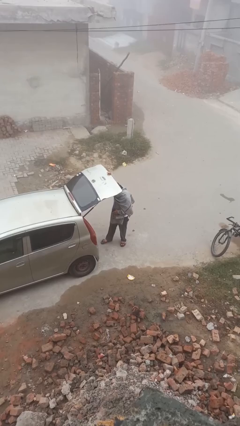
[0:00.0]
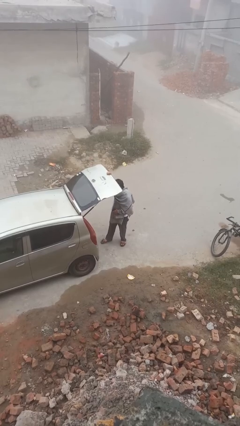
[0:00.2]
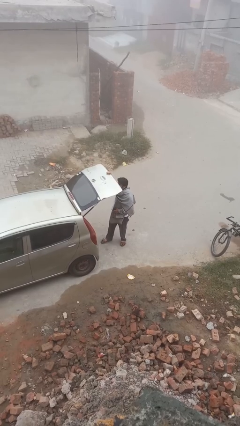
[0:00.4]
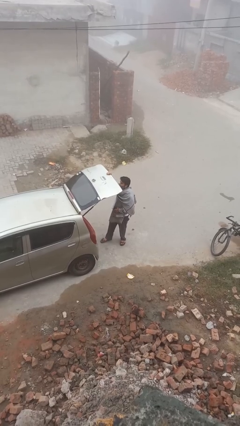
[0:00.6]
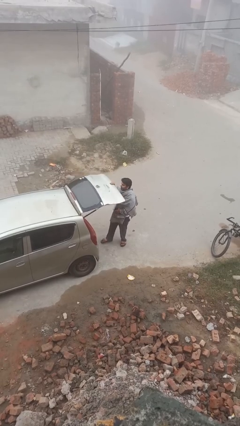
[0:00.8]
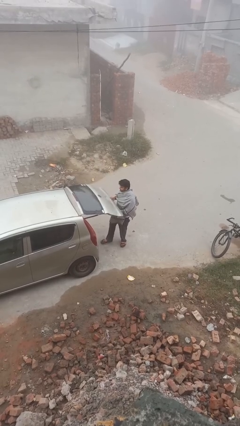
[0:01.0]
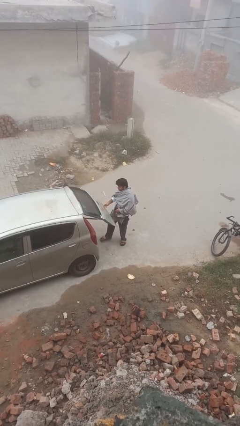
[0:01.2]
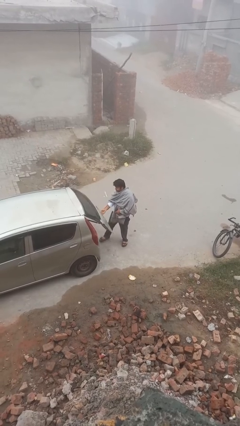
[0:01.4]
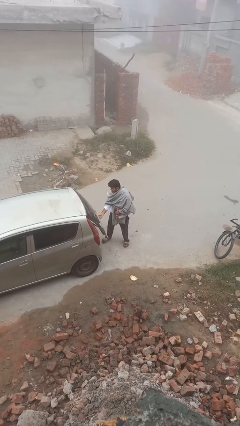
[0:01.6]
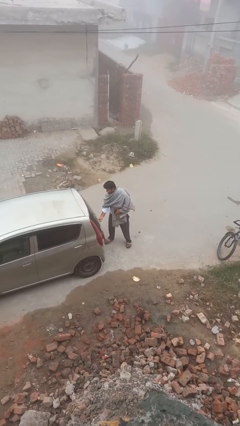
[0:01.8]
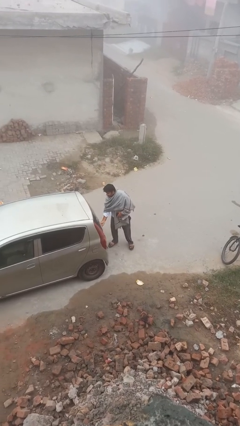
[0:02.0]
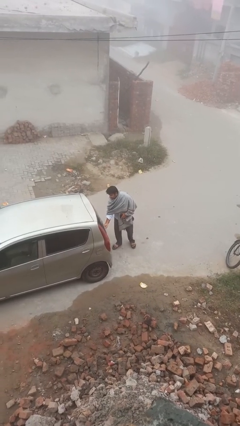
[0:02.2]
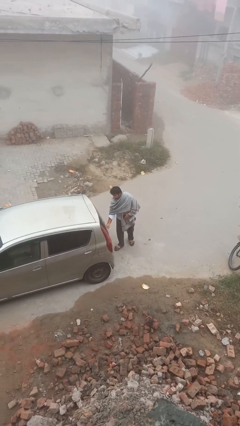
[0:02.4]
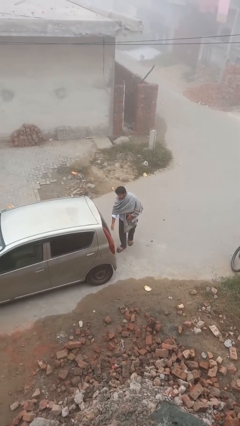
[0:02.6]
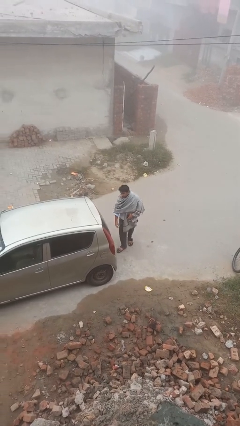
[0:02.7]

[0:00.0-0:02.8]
person closes car trunk

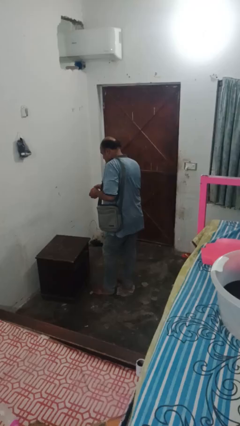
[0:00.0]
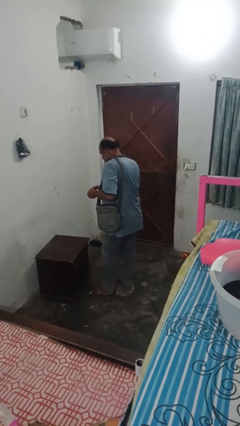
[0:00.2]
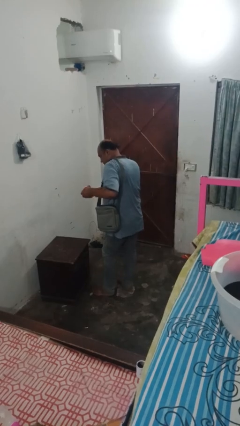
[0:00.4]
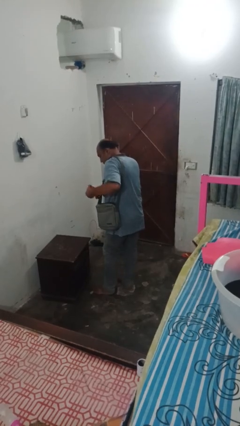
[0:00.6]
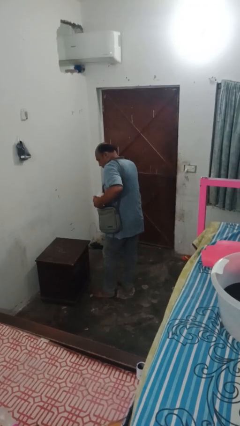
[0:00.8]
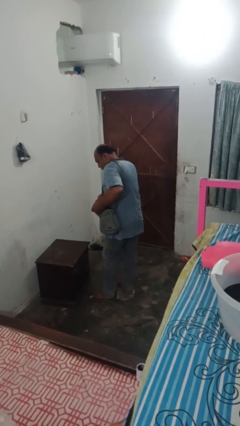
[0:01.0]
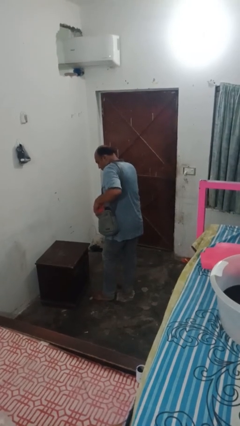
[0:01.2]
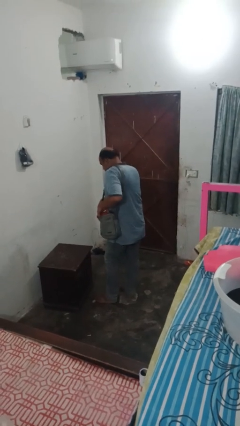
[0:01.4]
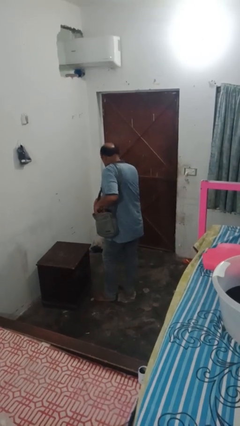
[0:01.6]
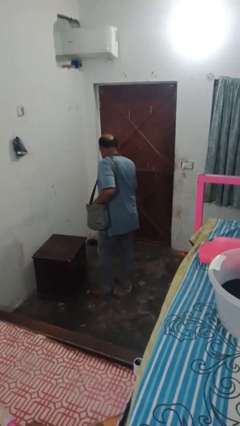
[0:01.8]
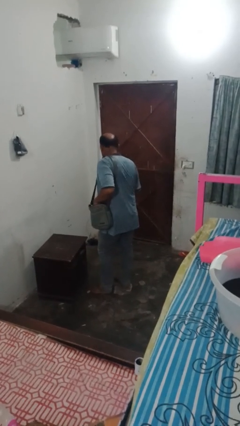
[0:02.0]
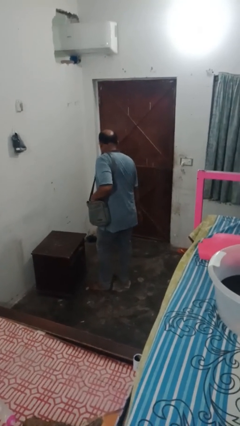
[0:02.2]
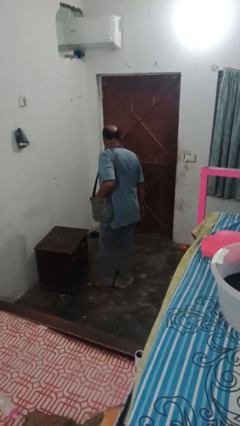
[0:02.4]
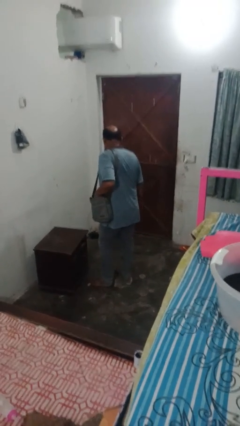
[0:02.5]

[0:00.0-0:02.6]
person puts object into bag

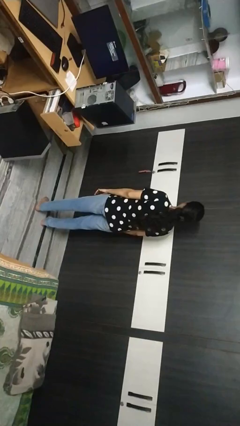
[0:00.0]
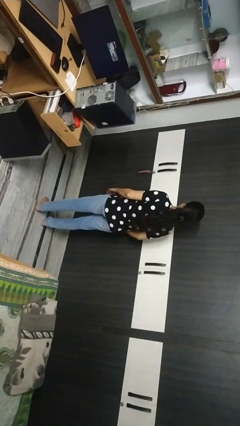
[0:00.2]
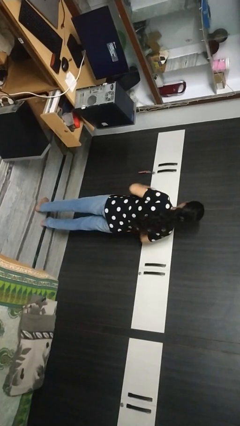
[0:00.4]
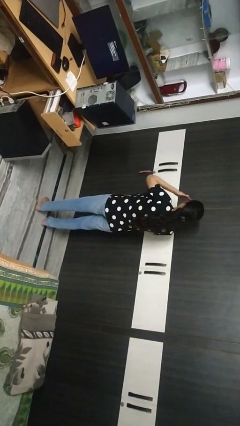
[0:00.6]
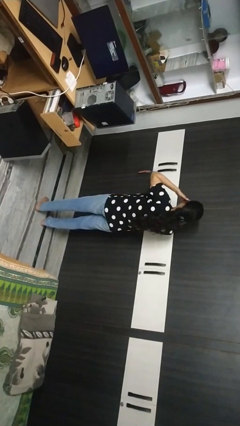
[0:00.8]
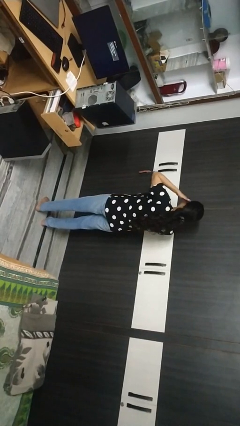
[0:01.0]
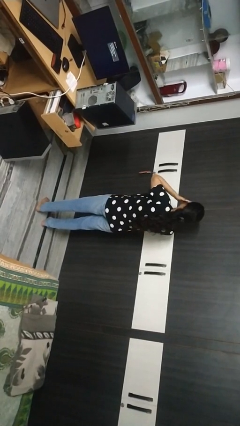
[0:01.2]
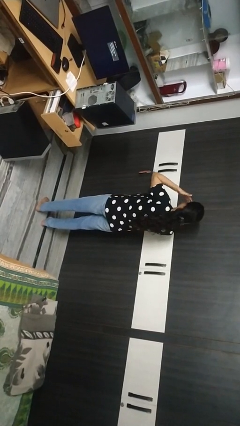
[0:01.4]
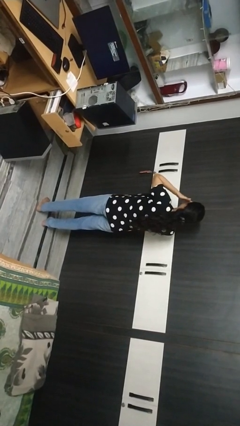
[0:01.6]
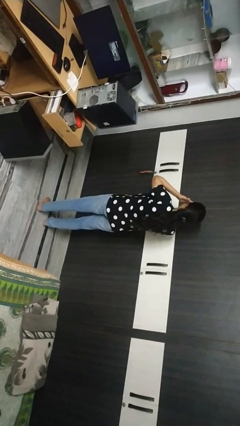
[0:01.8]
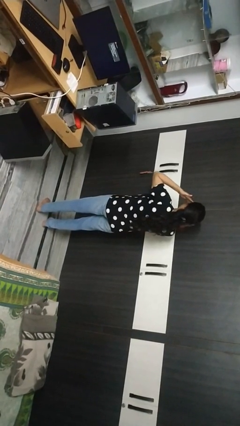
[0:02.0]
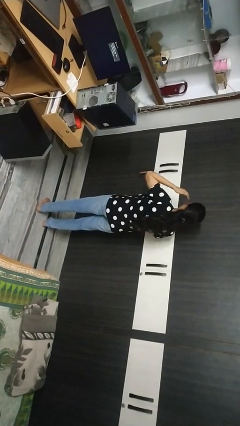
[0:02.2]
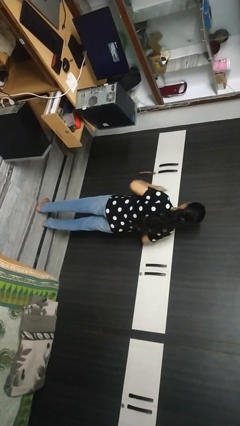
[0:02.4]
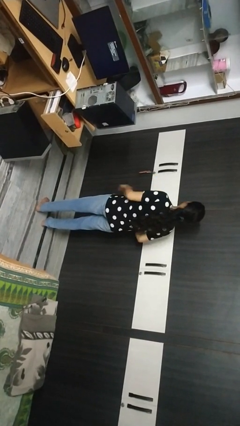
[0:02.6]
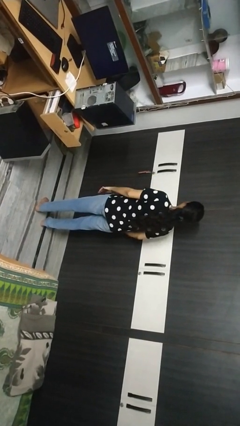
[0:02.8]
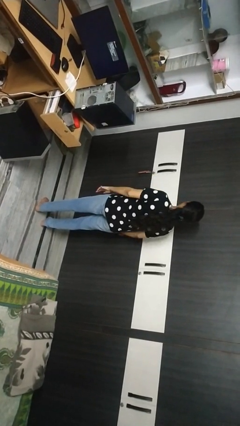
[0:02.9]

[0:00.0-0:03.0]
person rubs eyes

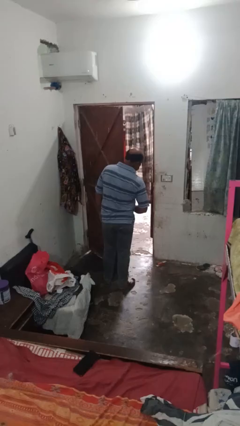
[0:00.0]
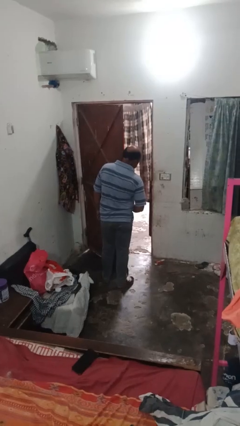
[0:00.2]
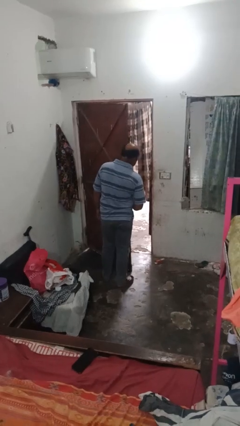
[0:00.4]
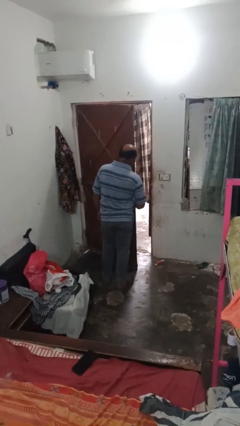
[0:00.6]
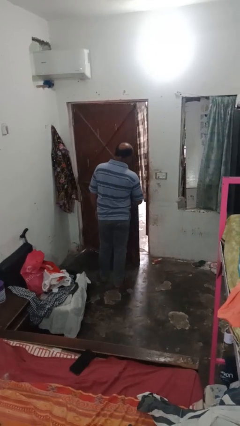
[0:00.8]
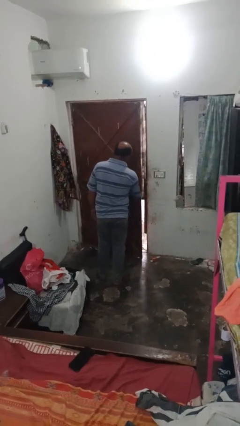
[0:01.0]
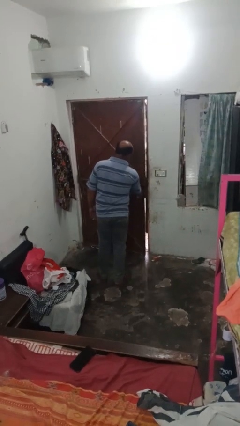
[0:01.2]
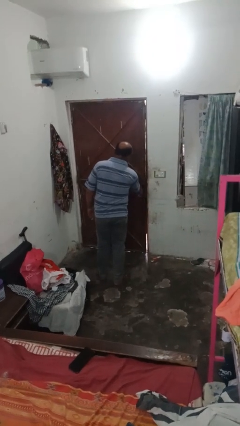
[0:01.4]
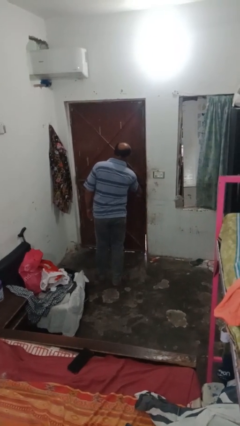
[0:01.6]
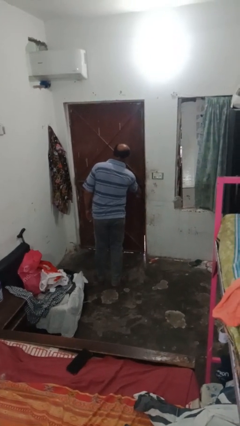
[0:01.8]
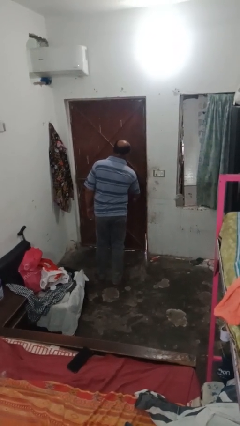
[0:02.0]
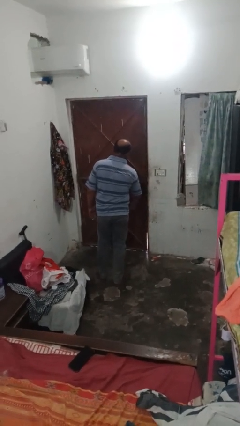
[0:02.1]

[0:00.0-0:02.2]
person closes closet door

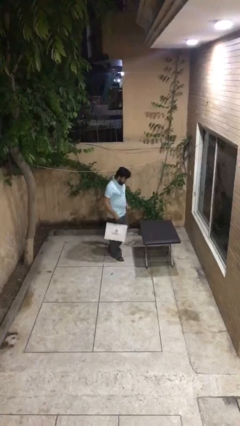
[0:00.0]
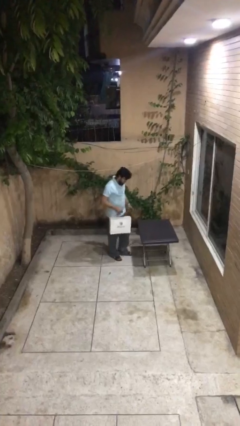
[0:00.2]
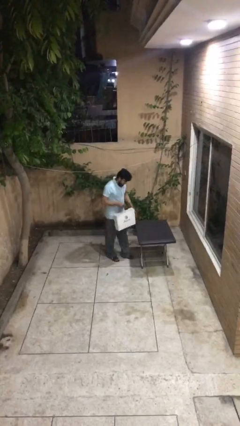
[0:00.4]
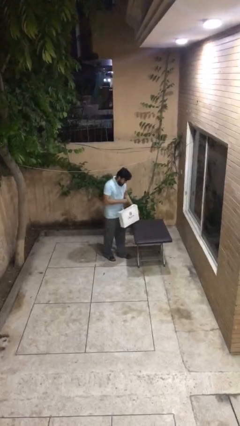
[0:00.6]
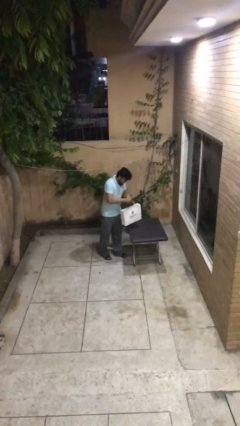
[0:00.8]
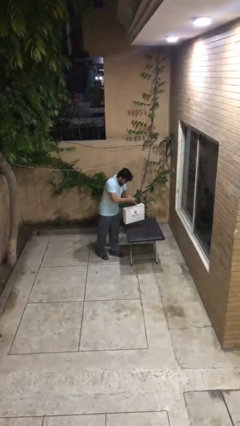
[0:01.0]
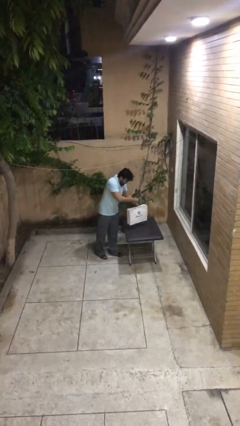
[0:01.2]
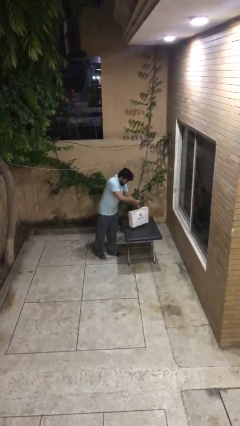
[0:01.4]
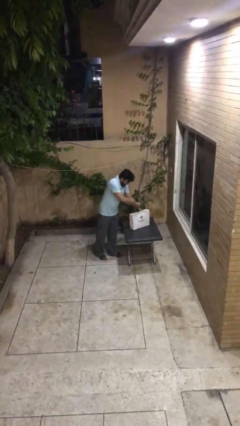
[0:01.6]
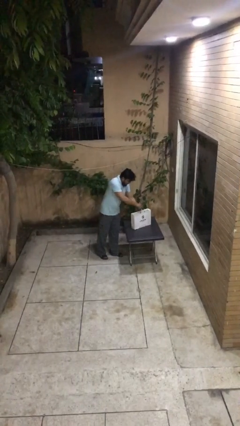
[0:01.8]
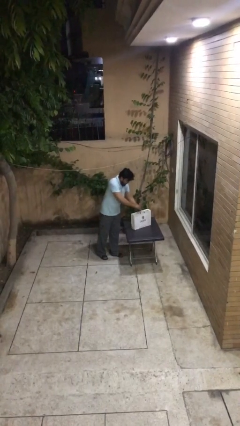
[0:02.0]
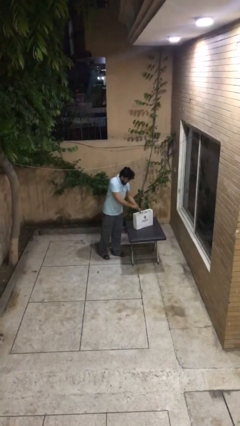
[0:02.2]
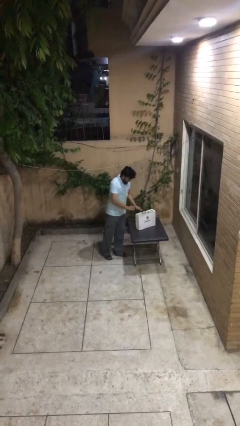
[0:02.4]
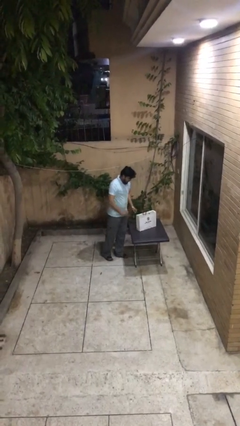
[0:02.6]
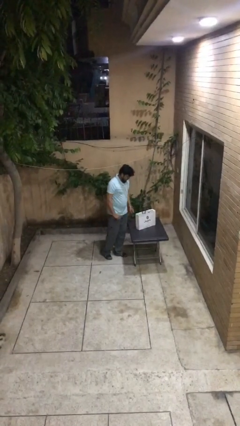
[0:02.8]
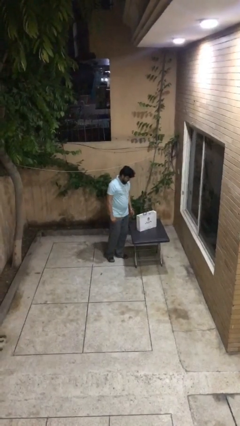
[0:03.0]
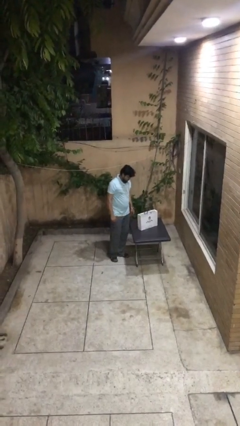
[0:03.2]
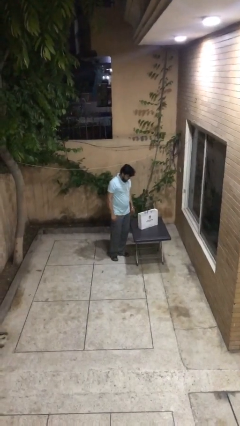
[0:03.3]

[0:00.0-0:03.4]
person puts down object on table

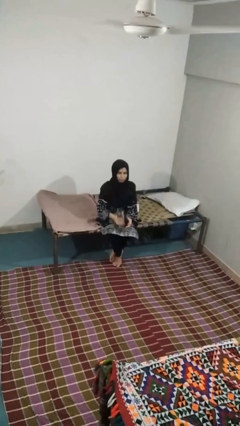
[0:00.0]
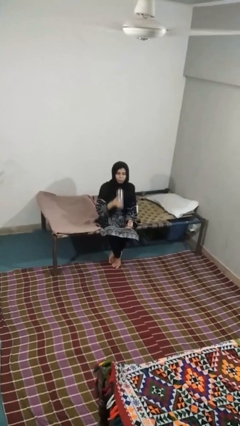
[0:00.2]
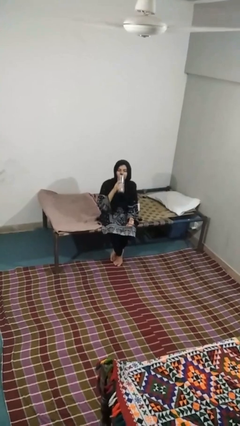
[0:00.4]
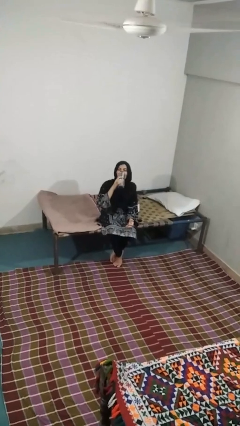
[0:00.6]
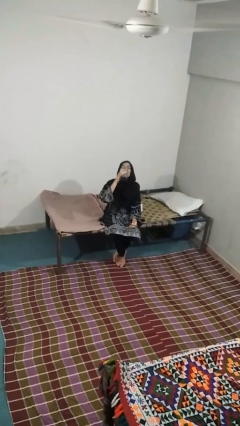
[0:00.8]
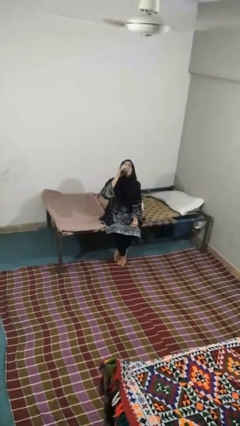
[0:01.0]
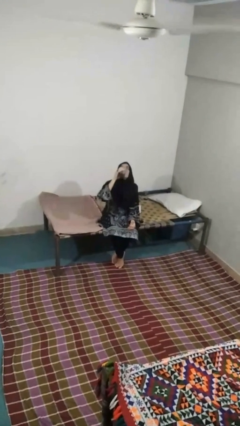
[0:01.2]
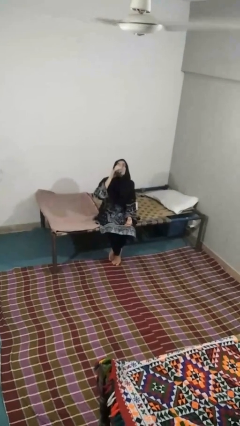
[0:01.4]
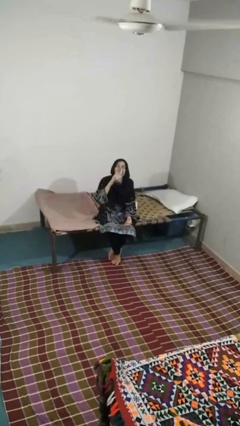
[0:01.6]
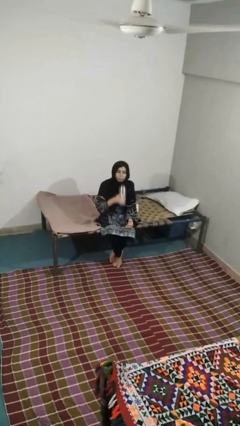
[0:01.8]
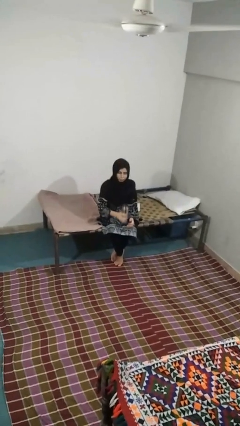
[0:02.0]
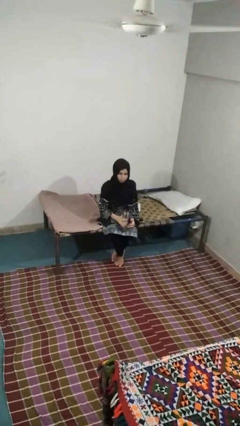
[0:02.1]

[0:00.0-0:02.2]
person drinks from beverage can

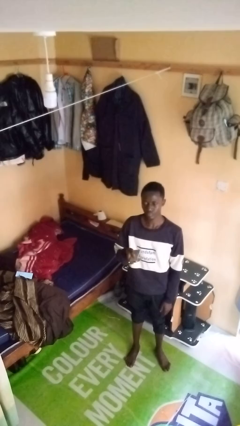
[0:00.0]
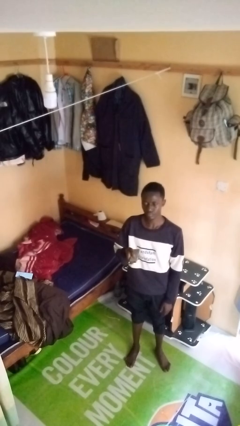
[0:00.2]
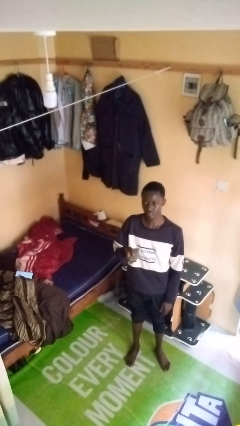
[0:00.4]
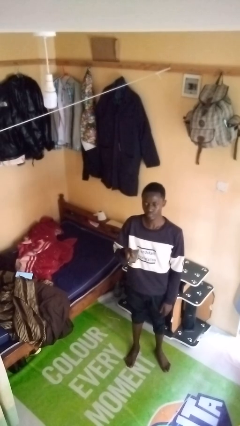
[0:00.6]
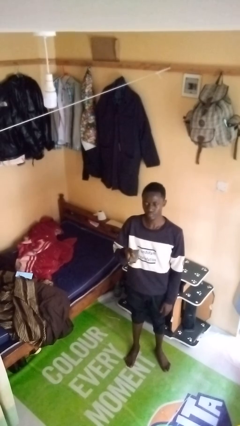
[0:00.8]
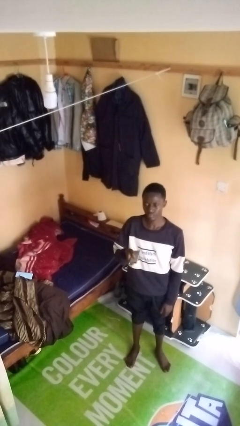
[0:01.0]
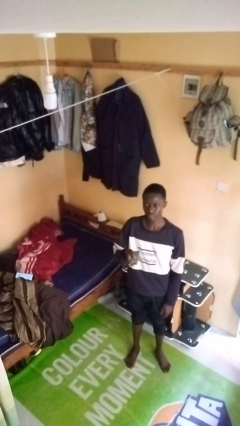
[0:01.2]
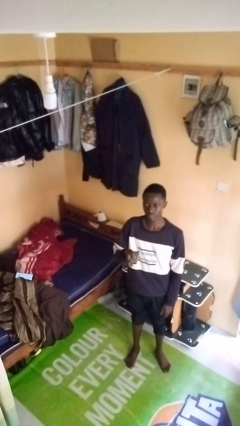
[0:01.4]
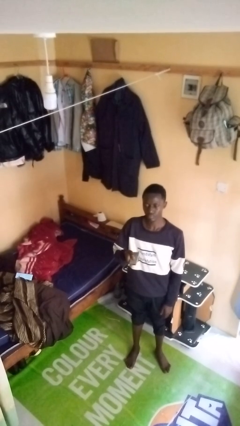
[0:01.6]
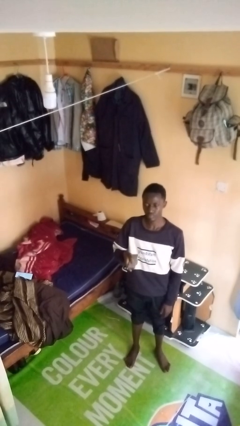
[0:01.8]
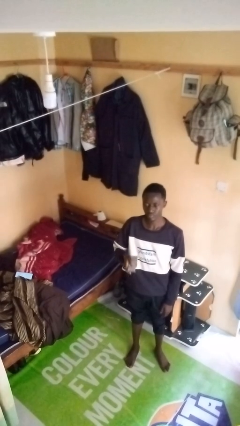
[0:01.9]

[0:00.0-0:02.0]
person uses television remote
